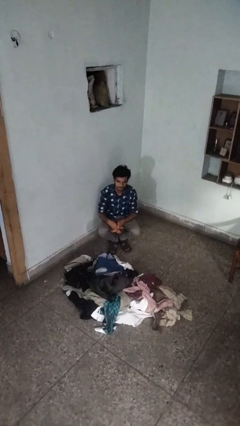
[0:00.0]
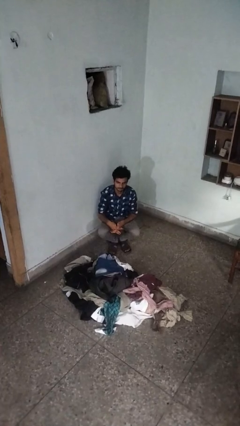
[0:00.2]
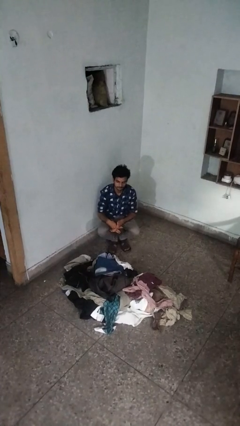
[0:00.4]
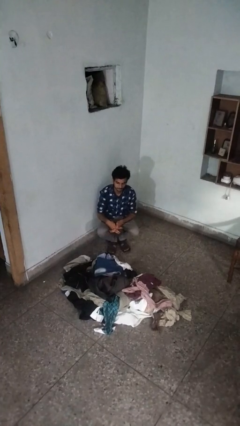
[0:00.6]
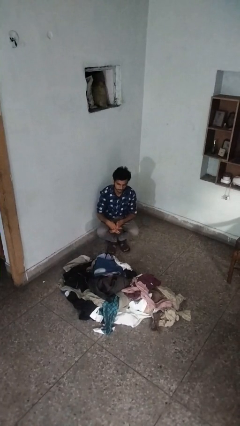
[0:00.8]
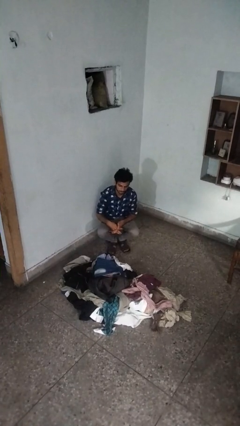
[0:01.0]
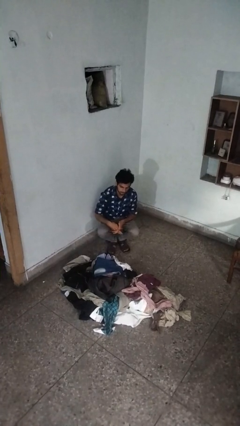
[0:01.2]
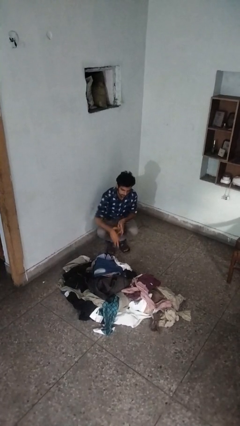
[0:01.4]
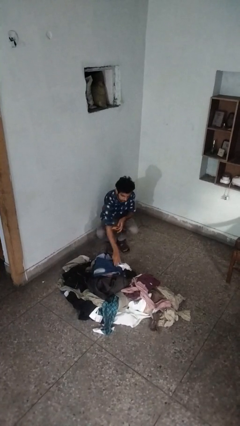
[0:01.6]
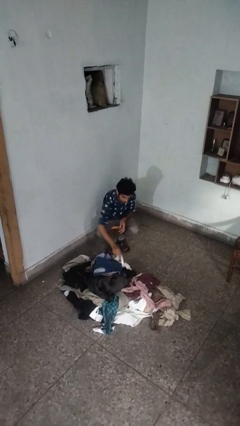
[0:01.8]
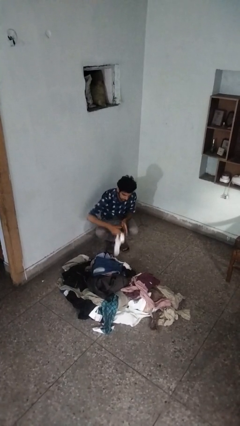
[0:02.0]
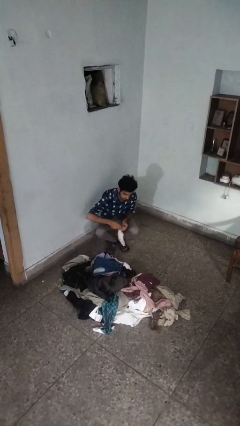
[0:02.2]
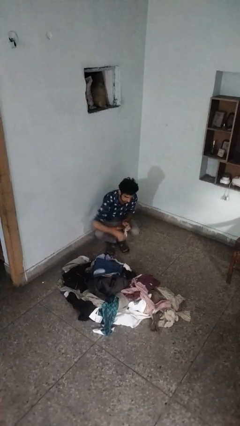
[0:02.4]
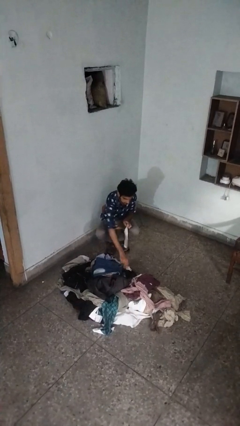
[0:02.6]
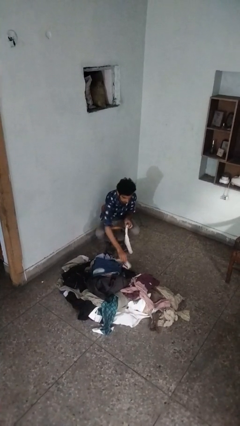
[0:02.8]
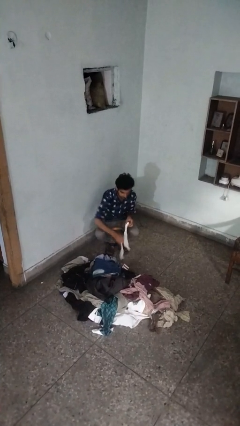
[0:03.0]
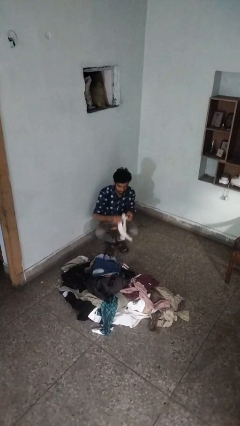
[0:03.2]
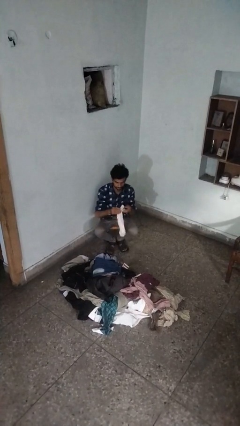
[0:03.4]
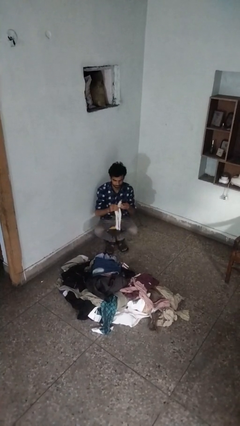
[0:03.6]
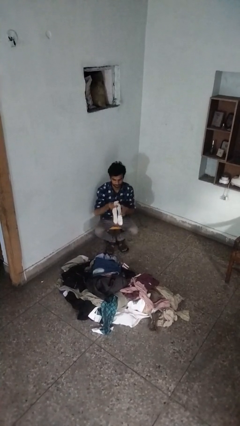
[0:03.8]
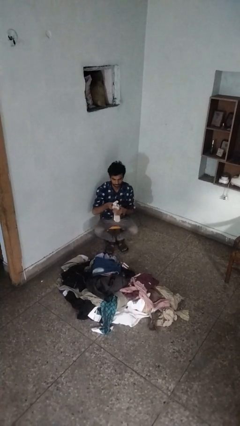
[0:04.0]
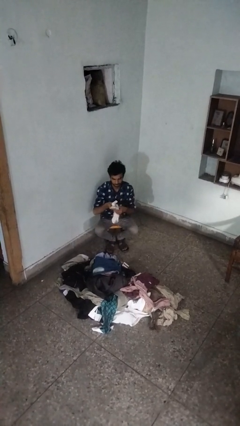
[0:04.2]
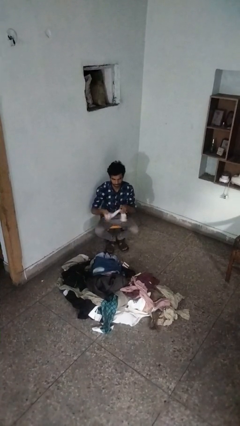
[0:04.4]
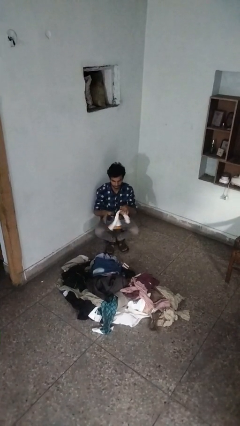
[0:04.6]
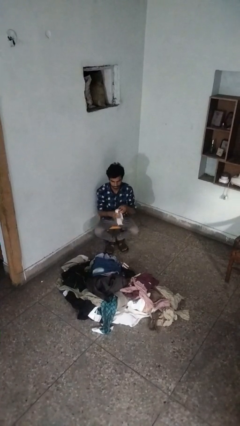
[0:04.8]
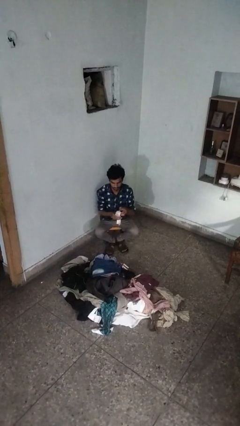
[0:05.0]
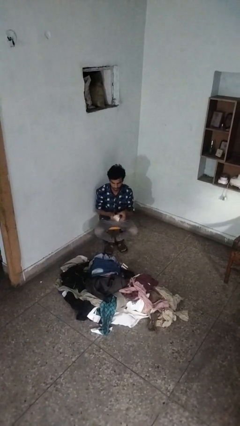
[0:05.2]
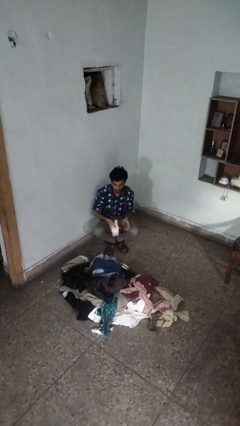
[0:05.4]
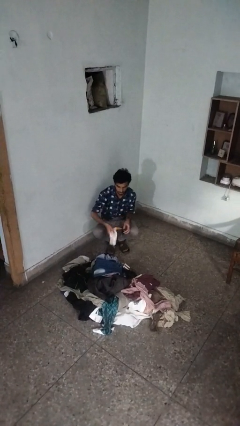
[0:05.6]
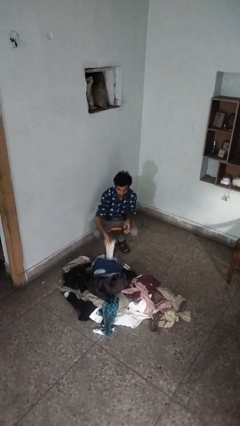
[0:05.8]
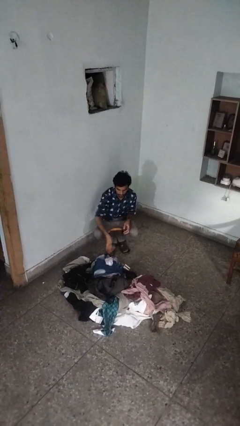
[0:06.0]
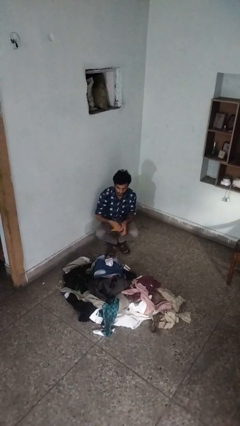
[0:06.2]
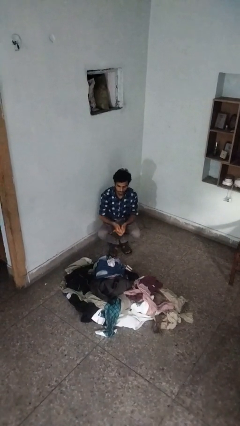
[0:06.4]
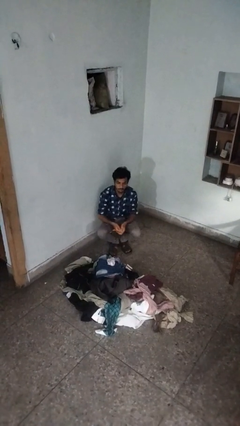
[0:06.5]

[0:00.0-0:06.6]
person folds socks

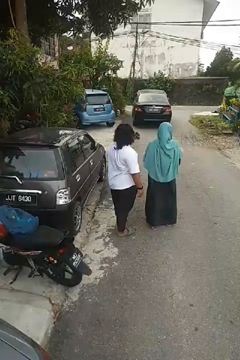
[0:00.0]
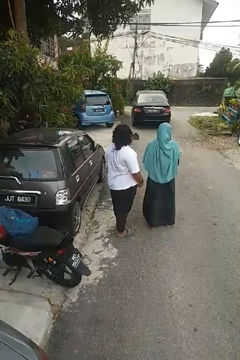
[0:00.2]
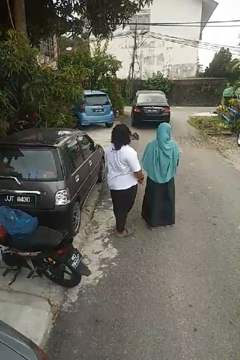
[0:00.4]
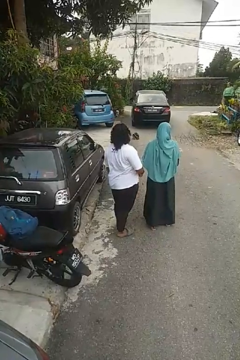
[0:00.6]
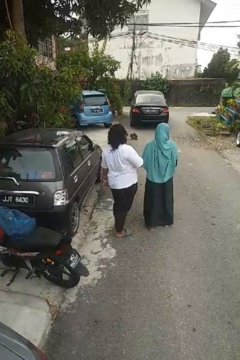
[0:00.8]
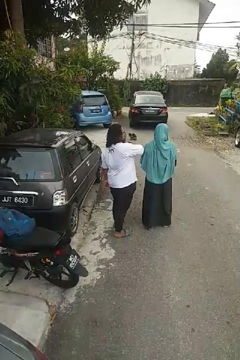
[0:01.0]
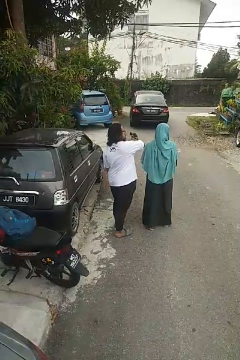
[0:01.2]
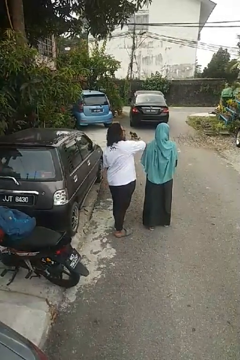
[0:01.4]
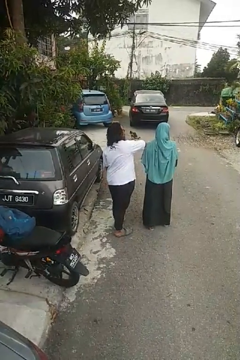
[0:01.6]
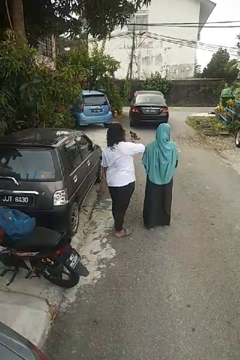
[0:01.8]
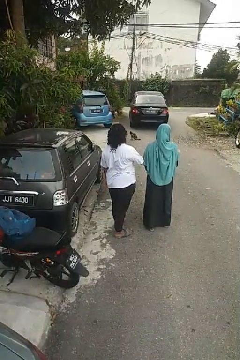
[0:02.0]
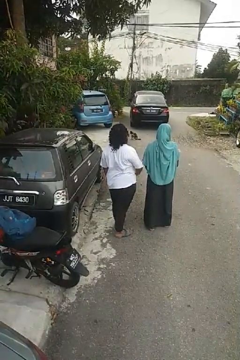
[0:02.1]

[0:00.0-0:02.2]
person nudges person with elbow

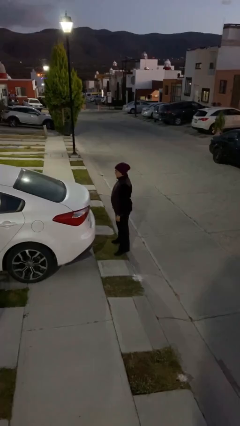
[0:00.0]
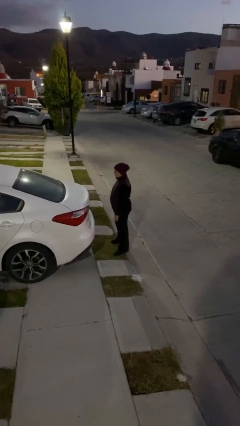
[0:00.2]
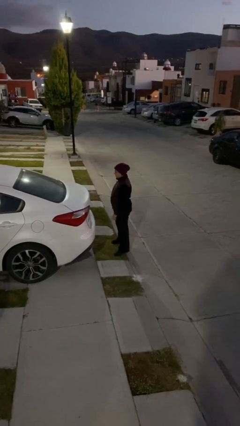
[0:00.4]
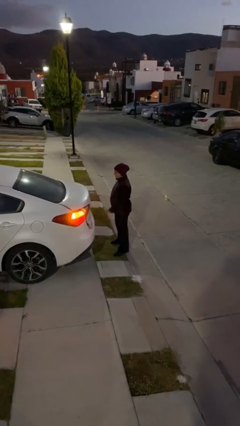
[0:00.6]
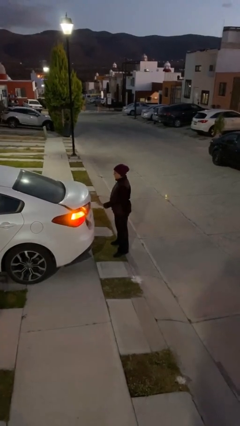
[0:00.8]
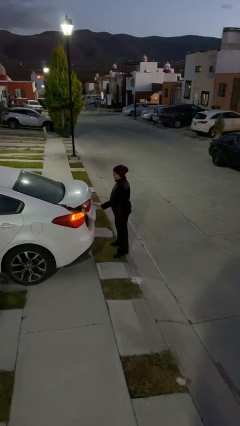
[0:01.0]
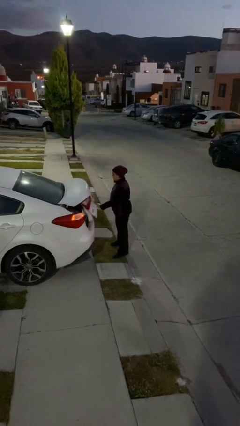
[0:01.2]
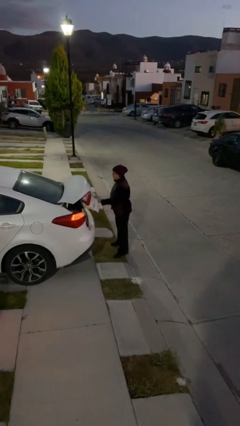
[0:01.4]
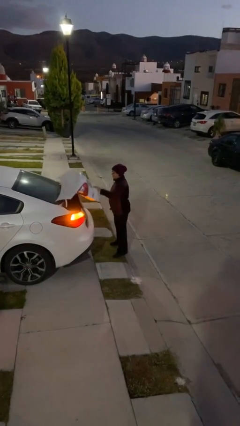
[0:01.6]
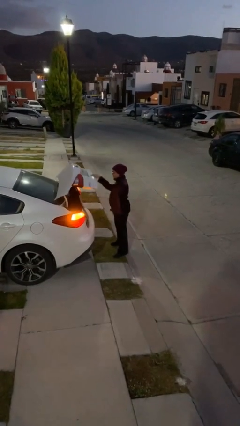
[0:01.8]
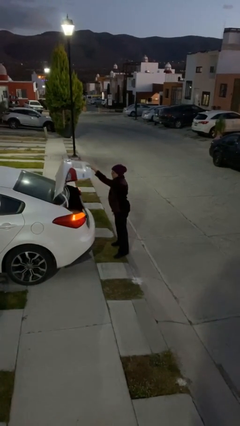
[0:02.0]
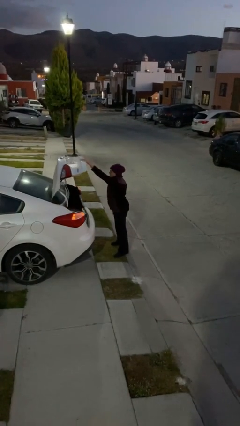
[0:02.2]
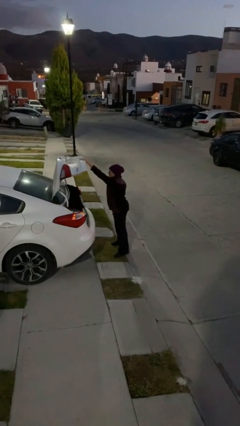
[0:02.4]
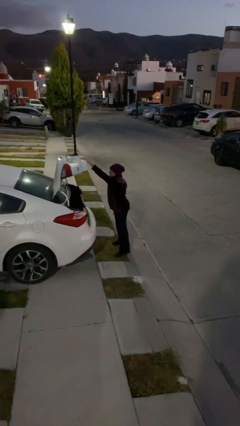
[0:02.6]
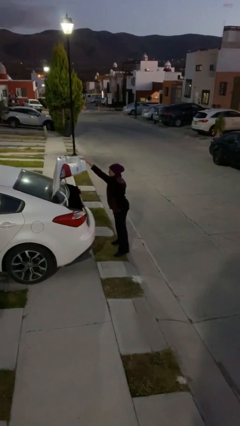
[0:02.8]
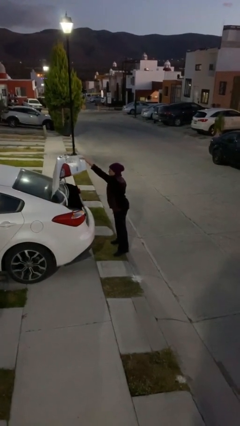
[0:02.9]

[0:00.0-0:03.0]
person opens car trunk

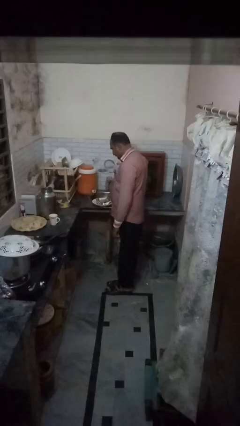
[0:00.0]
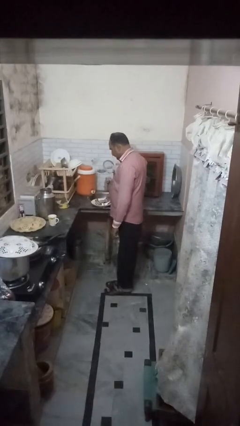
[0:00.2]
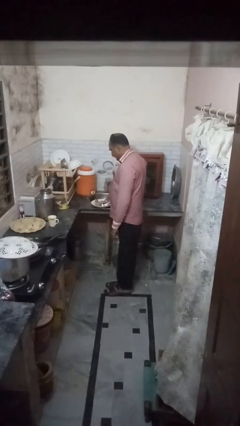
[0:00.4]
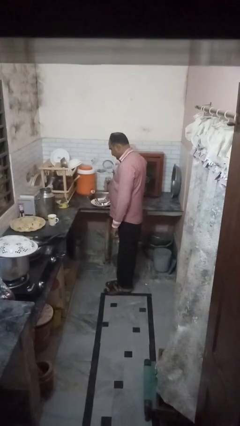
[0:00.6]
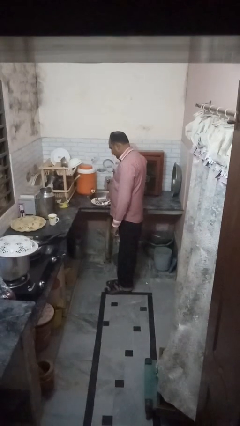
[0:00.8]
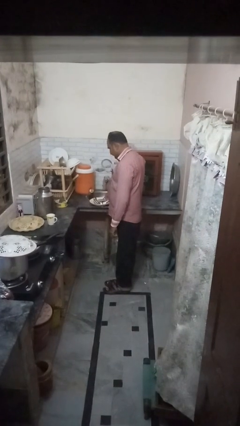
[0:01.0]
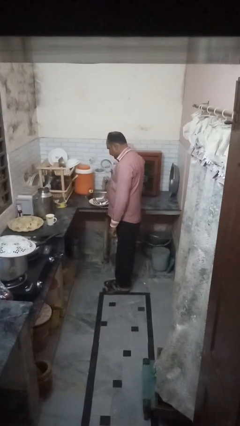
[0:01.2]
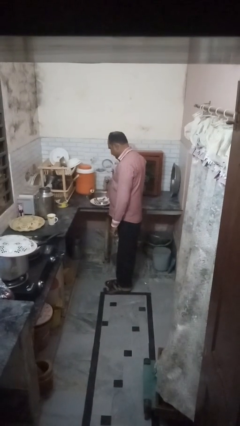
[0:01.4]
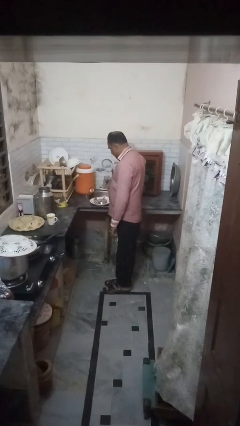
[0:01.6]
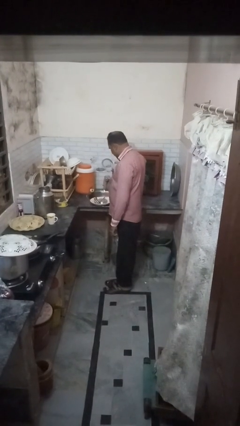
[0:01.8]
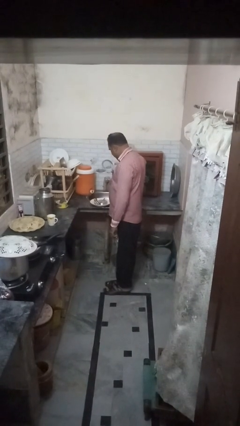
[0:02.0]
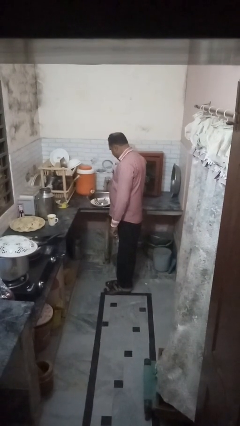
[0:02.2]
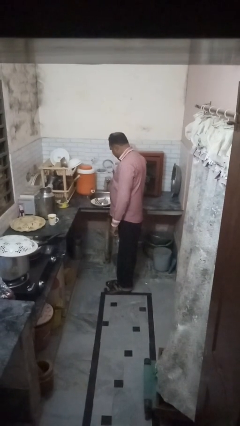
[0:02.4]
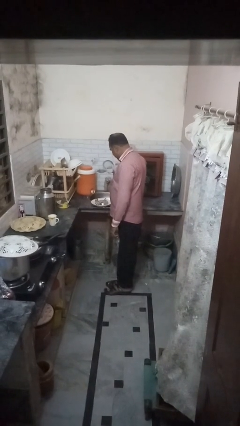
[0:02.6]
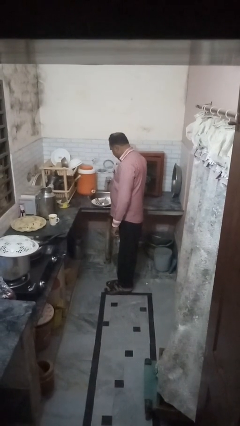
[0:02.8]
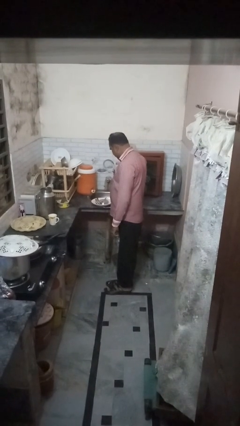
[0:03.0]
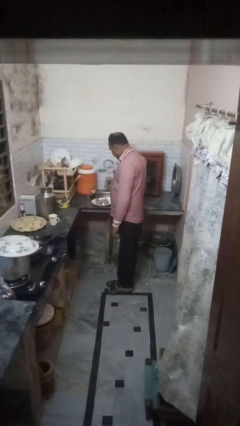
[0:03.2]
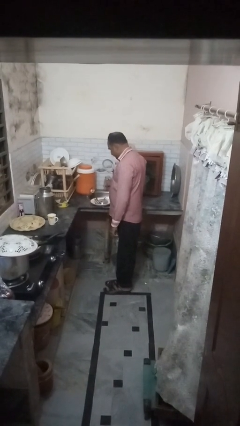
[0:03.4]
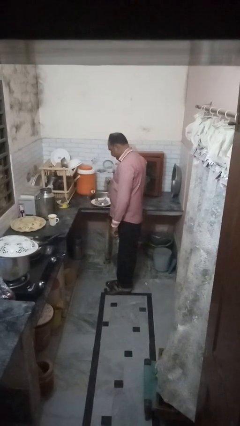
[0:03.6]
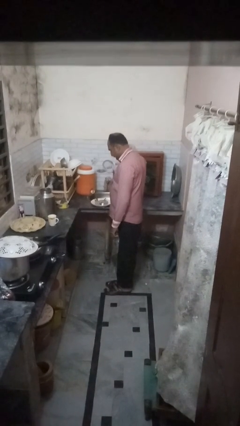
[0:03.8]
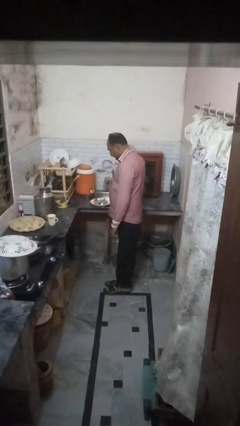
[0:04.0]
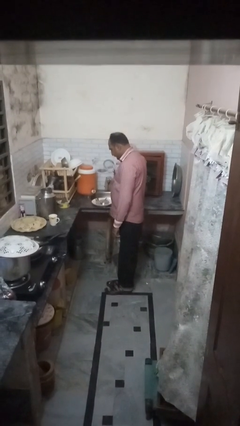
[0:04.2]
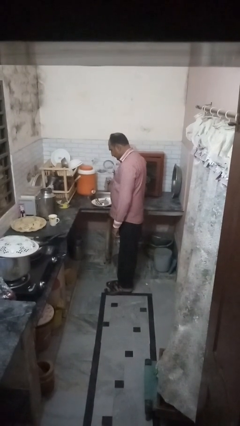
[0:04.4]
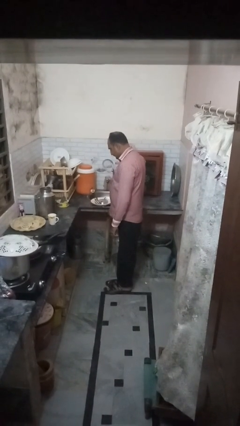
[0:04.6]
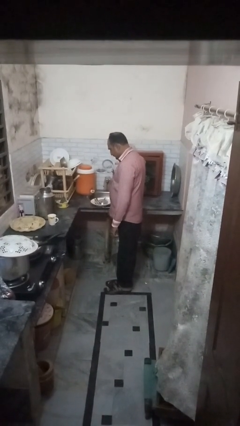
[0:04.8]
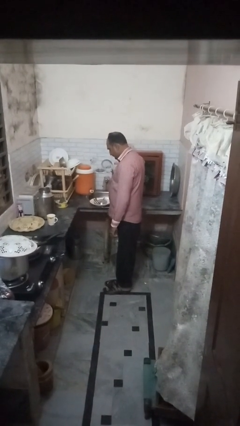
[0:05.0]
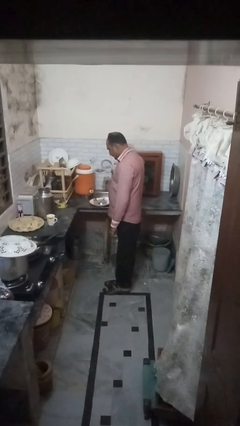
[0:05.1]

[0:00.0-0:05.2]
person loads dishwasher

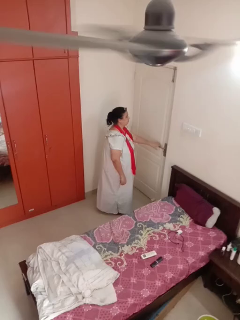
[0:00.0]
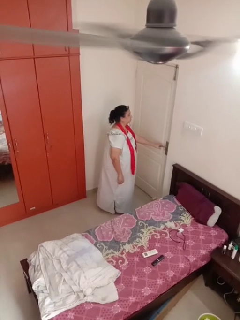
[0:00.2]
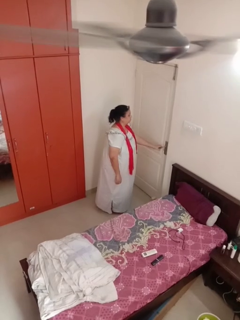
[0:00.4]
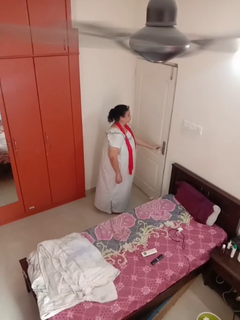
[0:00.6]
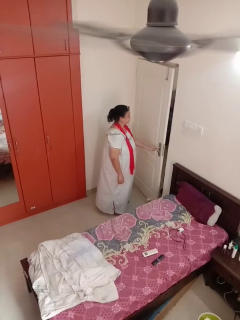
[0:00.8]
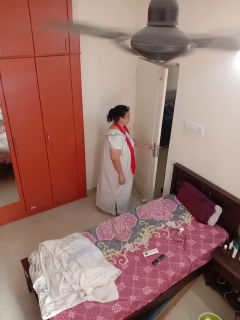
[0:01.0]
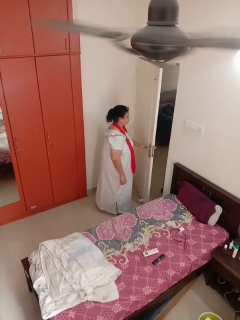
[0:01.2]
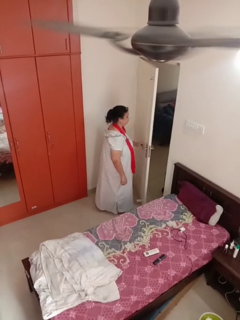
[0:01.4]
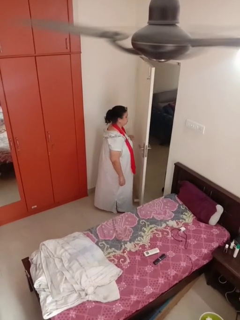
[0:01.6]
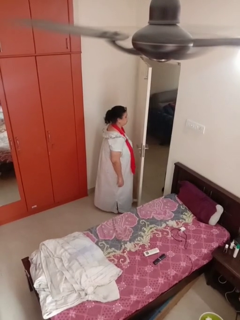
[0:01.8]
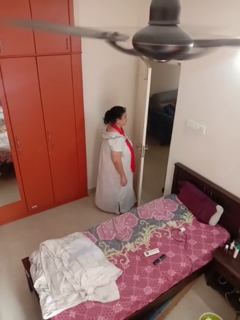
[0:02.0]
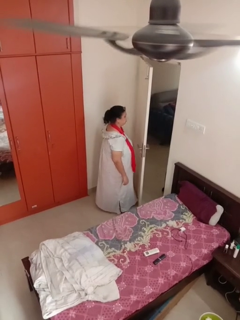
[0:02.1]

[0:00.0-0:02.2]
person opens facility door
